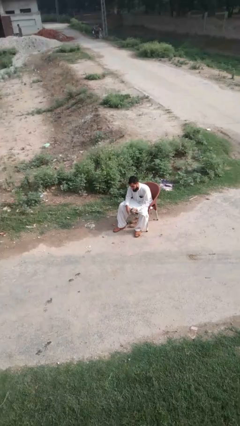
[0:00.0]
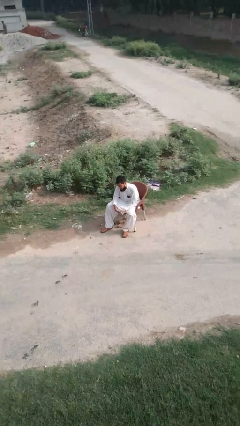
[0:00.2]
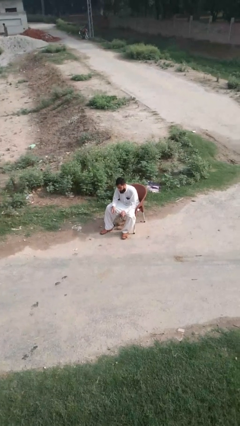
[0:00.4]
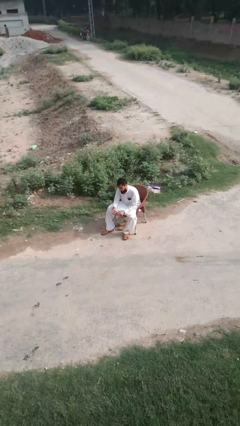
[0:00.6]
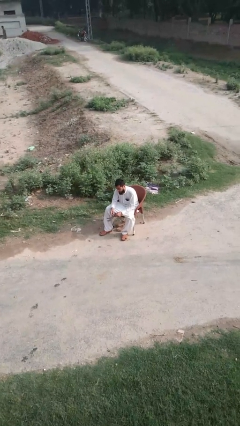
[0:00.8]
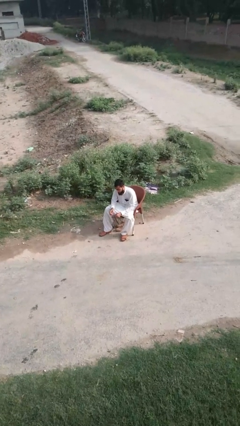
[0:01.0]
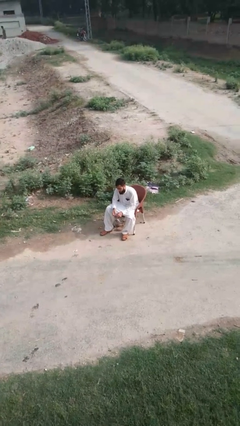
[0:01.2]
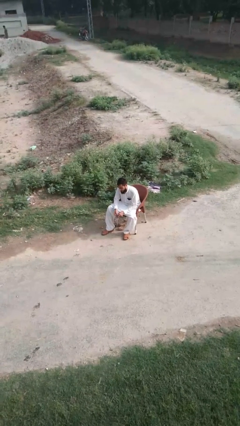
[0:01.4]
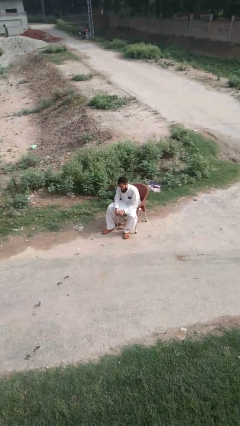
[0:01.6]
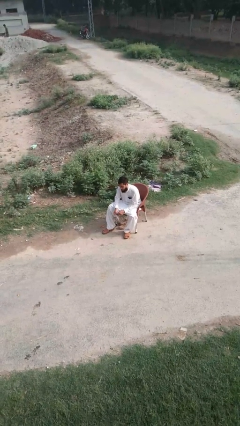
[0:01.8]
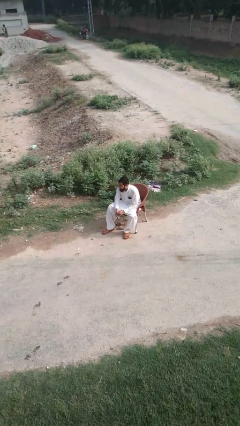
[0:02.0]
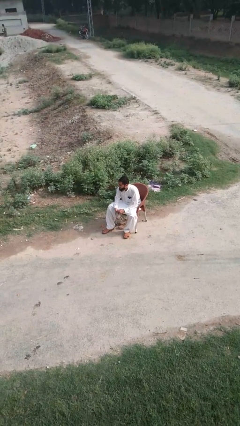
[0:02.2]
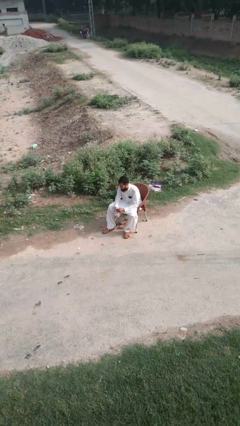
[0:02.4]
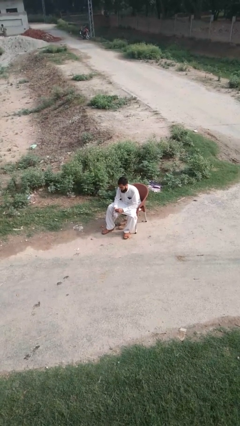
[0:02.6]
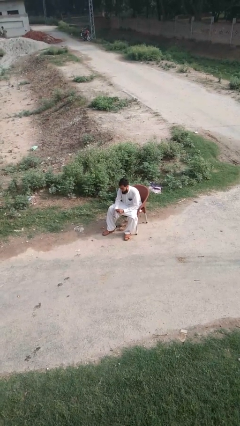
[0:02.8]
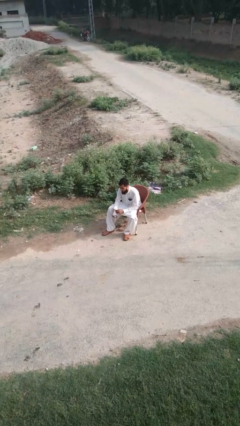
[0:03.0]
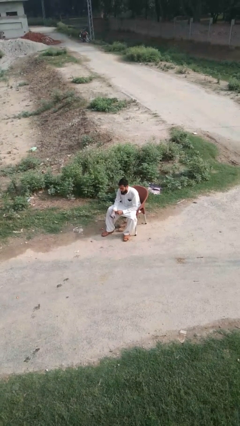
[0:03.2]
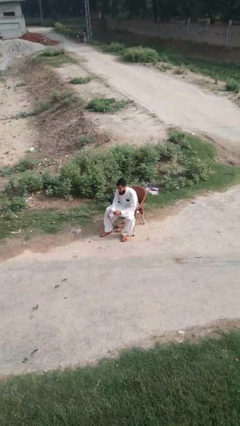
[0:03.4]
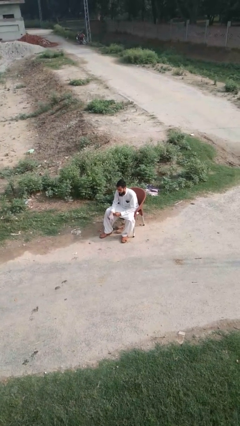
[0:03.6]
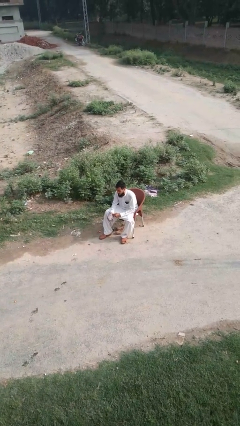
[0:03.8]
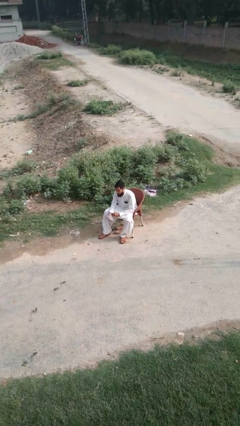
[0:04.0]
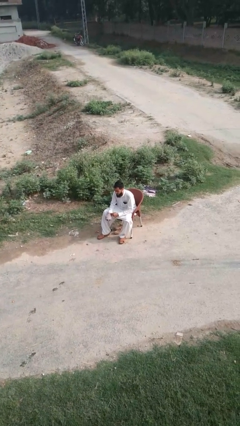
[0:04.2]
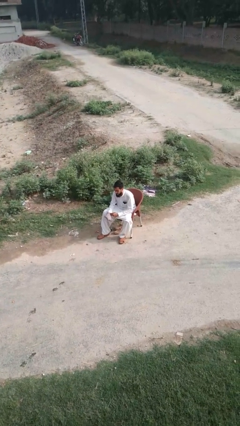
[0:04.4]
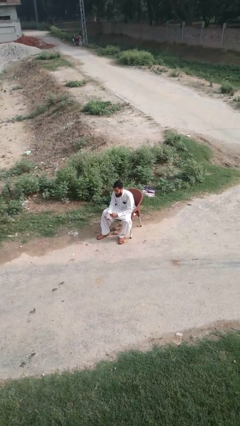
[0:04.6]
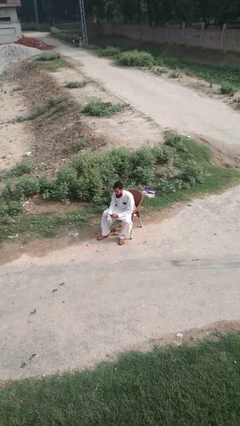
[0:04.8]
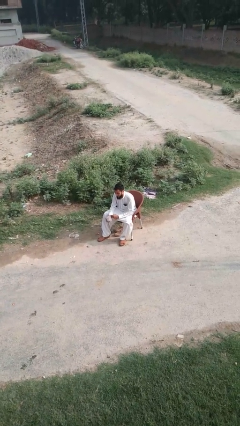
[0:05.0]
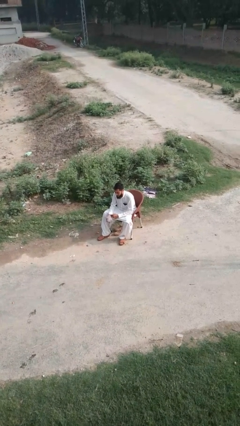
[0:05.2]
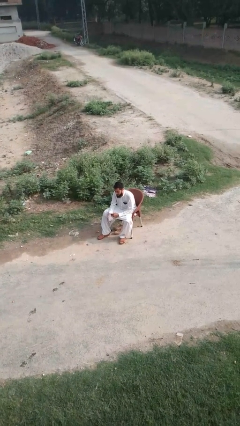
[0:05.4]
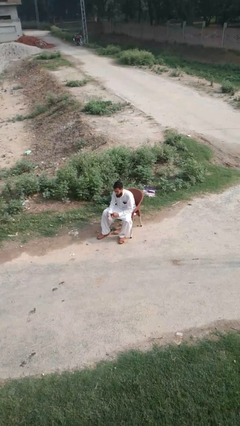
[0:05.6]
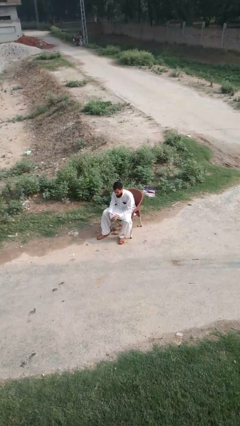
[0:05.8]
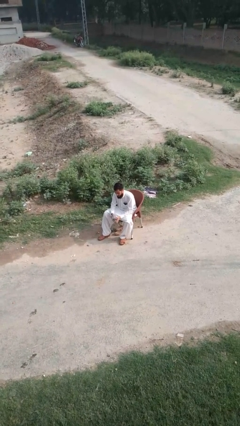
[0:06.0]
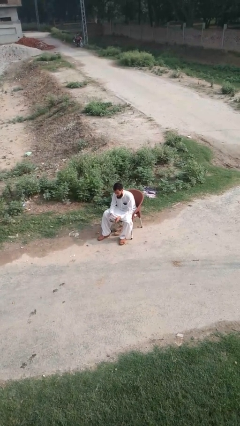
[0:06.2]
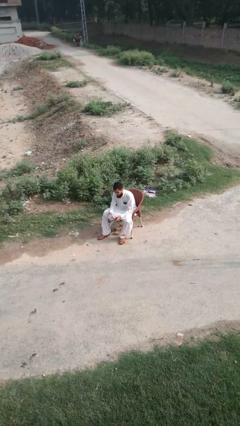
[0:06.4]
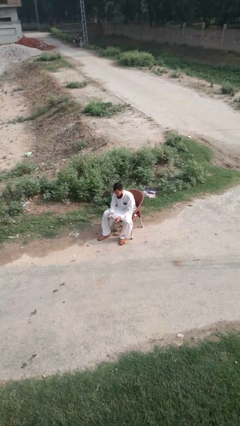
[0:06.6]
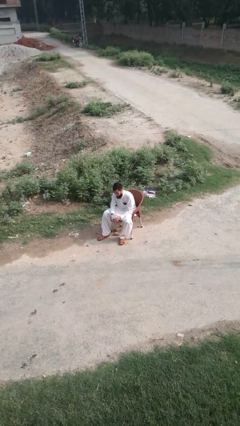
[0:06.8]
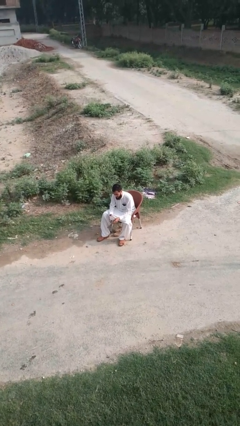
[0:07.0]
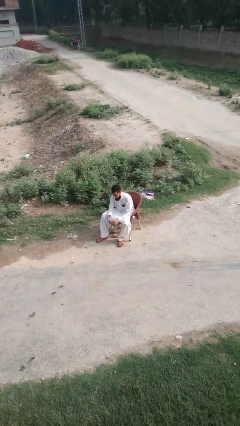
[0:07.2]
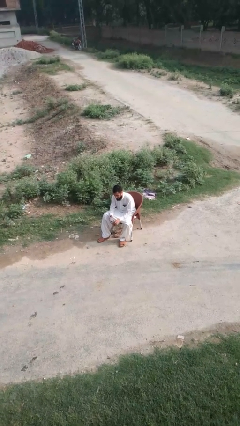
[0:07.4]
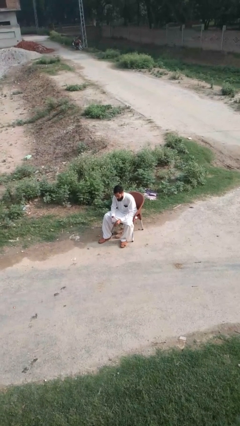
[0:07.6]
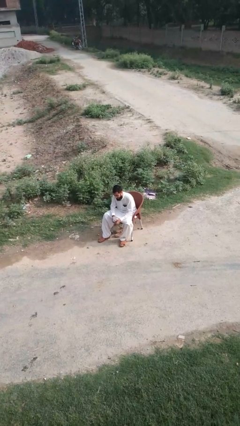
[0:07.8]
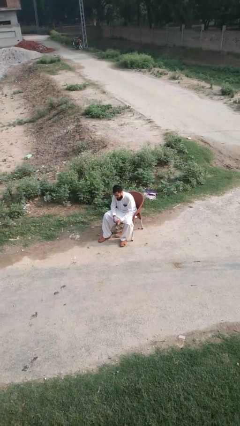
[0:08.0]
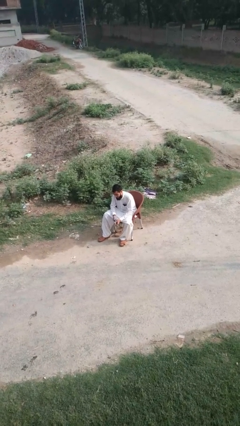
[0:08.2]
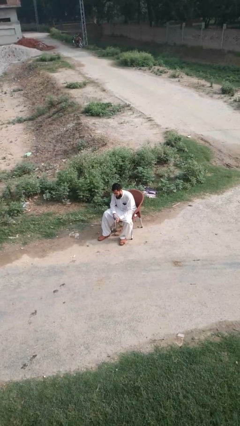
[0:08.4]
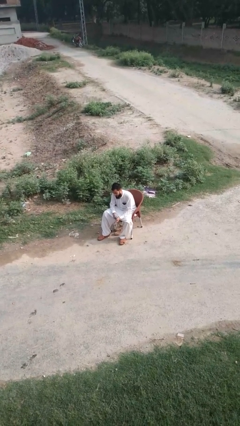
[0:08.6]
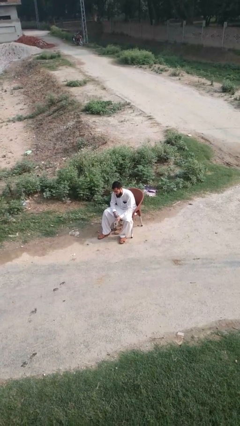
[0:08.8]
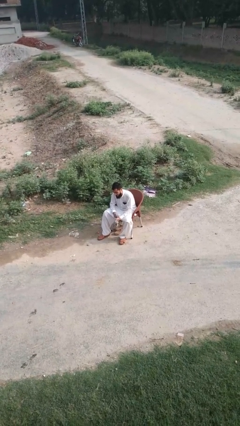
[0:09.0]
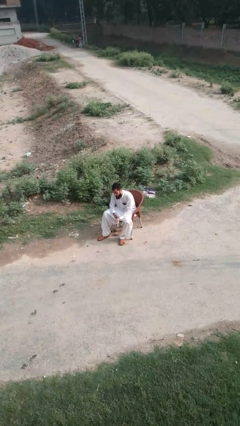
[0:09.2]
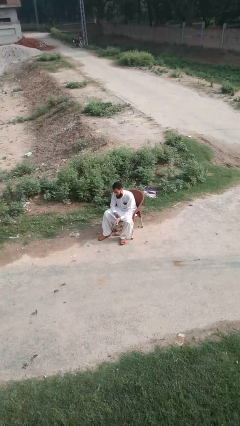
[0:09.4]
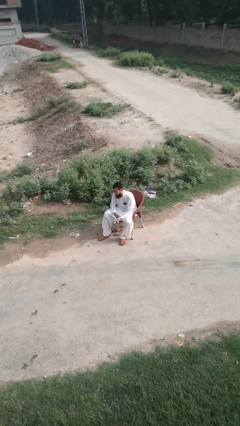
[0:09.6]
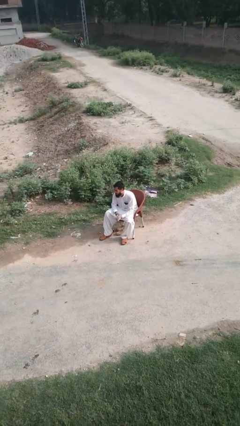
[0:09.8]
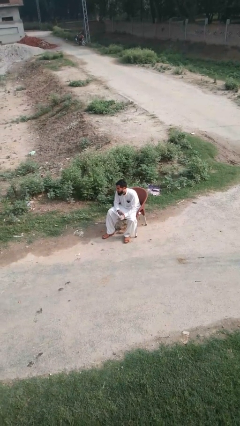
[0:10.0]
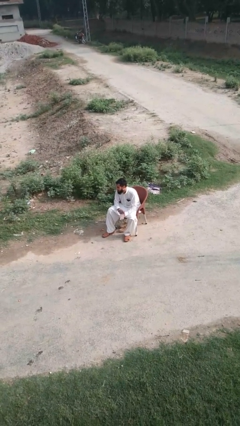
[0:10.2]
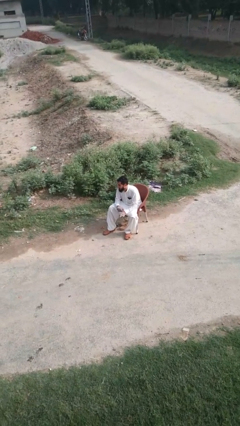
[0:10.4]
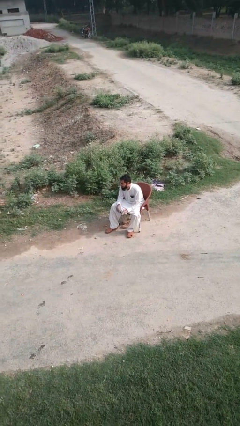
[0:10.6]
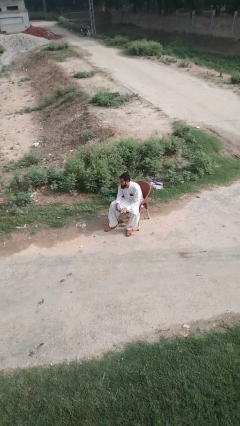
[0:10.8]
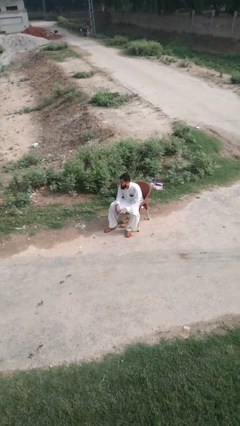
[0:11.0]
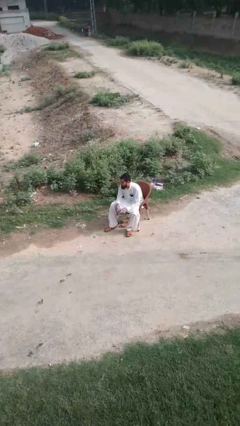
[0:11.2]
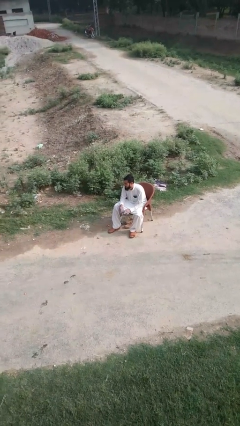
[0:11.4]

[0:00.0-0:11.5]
person puts on gloves

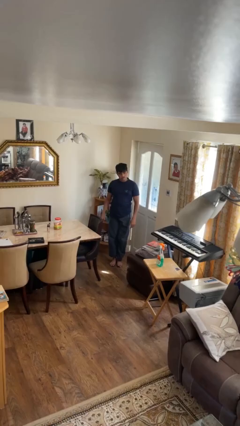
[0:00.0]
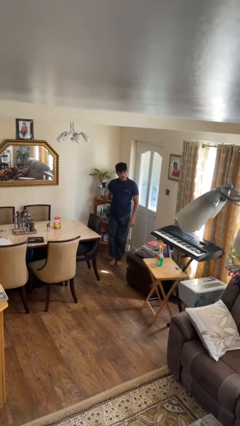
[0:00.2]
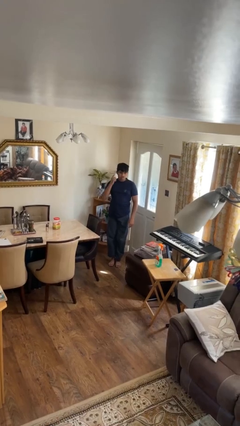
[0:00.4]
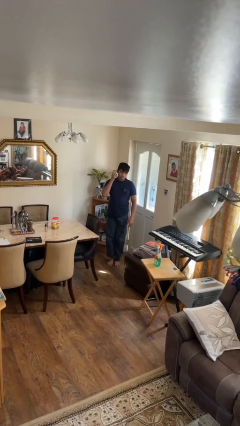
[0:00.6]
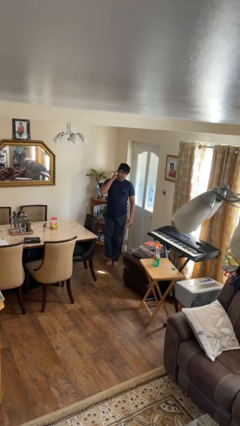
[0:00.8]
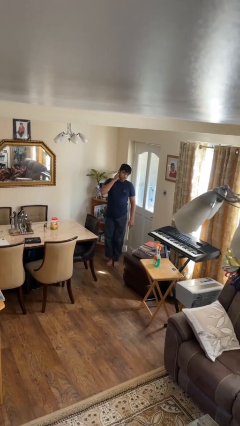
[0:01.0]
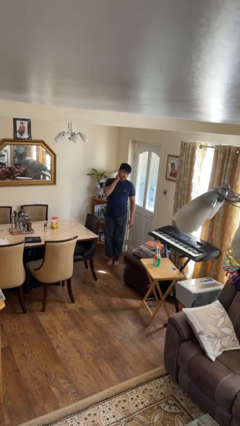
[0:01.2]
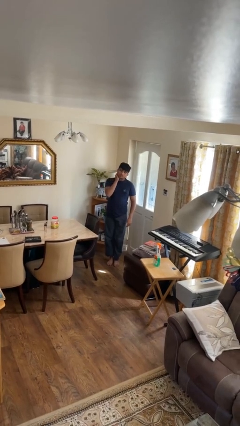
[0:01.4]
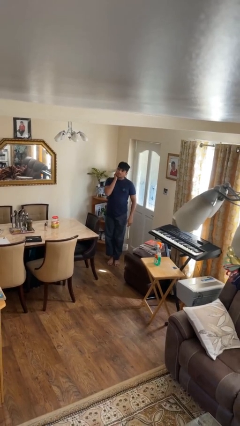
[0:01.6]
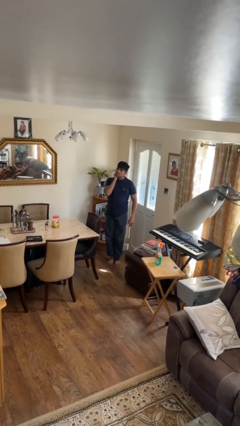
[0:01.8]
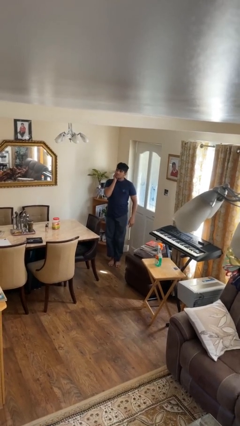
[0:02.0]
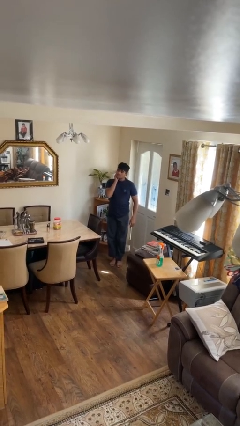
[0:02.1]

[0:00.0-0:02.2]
person puts fingers in ear

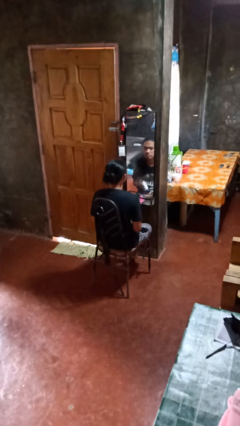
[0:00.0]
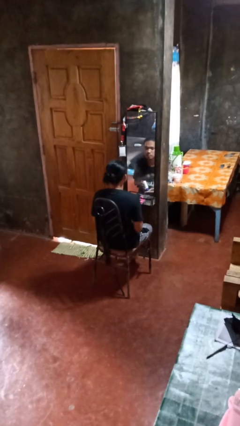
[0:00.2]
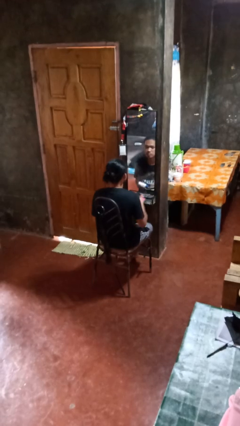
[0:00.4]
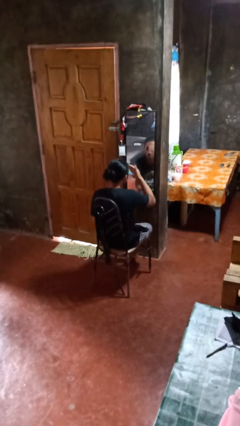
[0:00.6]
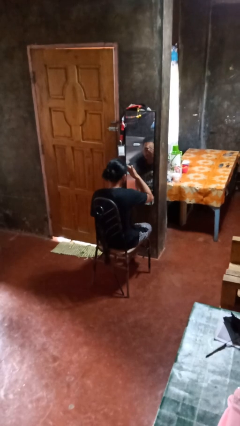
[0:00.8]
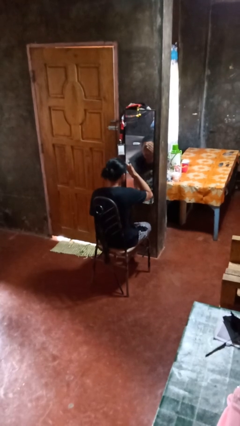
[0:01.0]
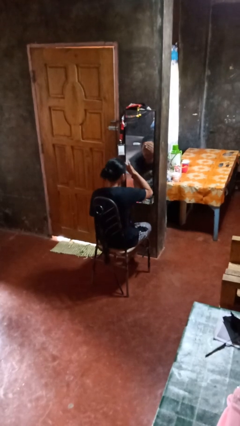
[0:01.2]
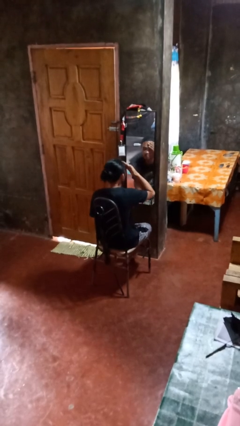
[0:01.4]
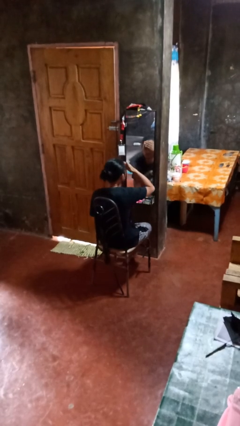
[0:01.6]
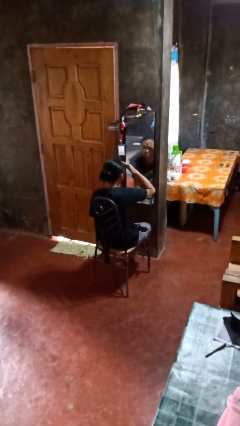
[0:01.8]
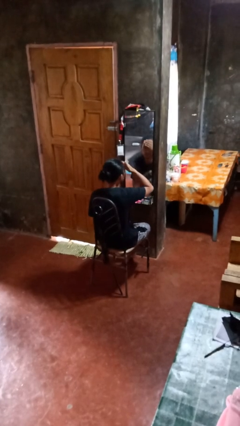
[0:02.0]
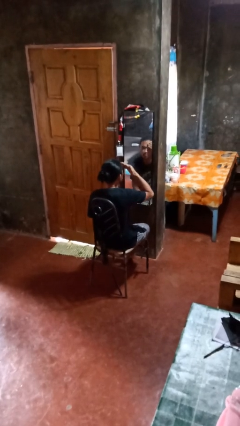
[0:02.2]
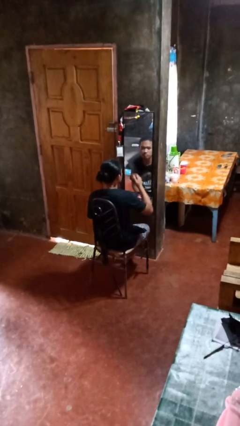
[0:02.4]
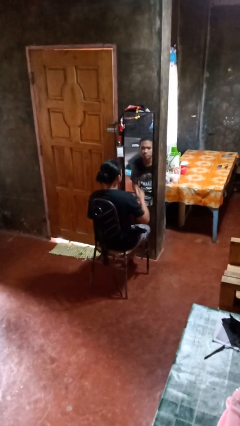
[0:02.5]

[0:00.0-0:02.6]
person applies foundation makeup

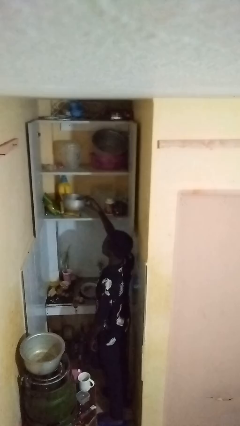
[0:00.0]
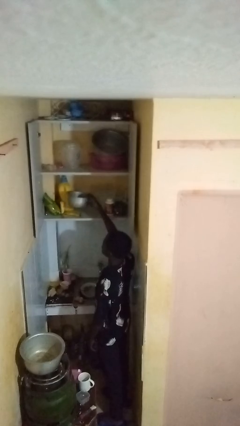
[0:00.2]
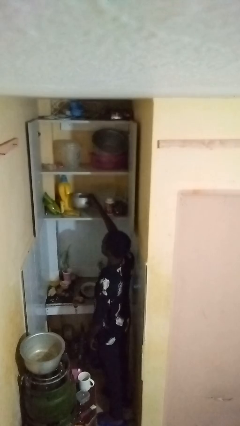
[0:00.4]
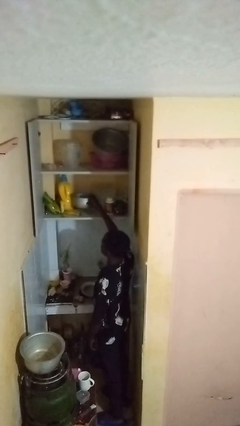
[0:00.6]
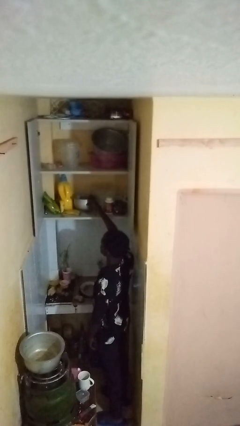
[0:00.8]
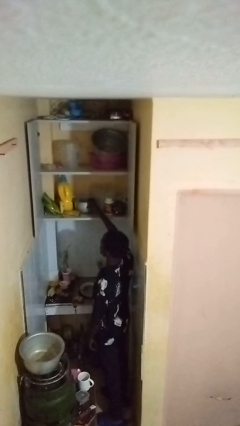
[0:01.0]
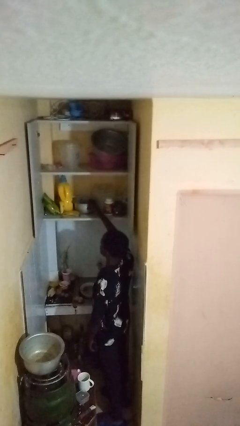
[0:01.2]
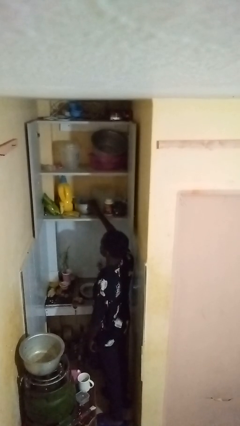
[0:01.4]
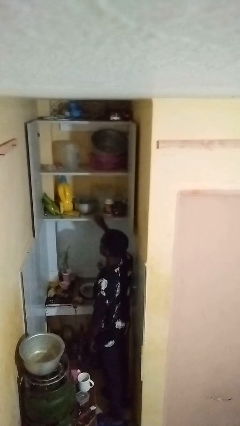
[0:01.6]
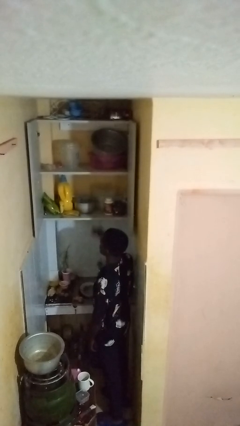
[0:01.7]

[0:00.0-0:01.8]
person puts object in cabinet
